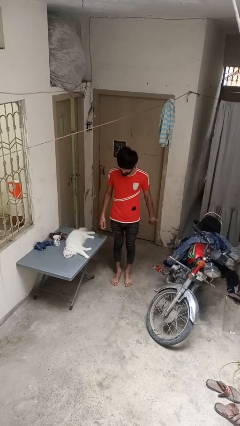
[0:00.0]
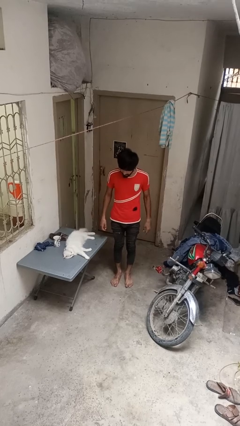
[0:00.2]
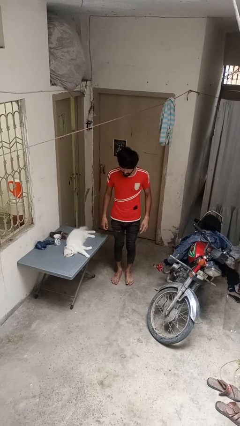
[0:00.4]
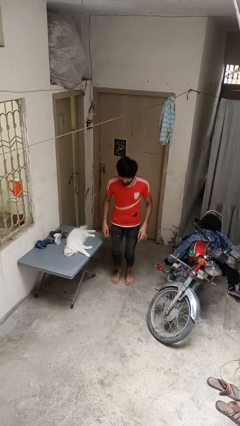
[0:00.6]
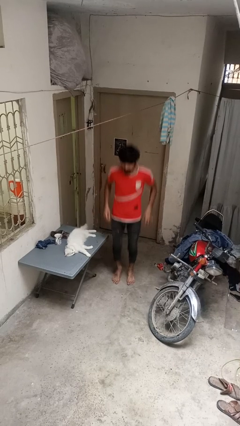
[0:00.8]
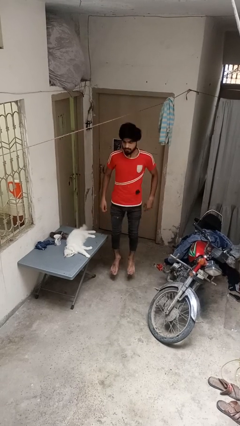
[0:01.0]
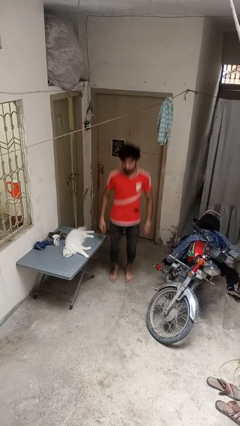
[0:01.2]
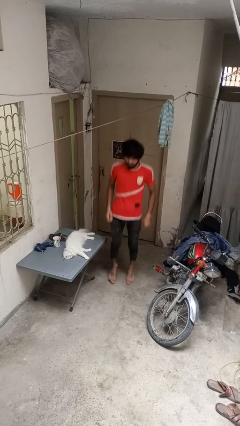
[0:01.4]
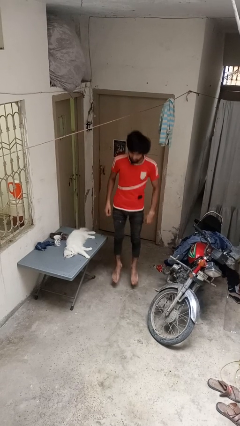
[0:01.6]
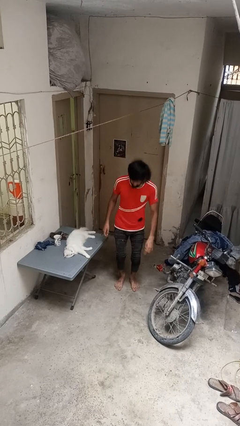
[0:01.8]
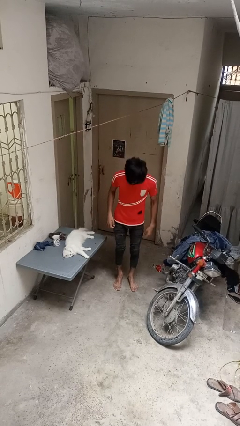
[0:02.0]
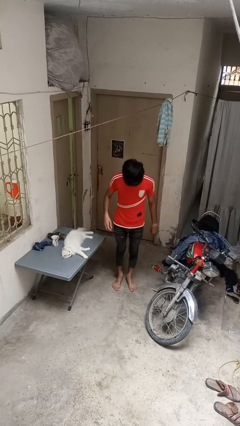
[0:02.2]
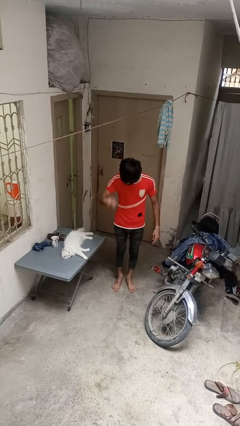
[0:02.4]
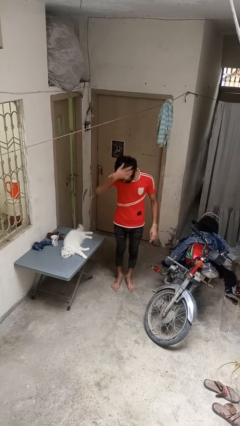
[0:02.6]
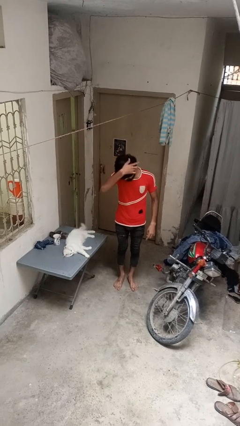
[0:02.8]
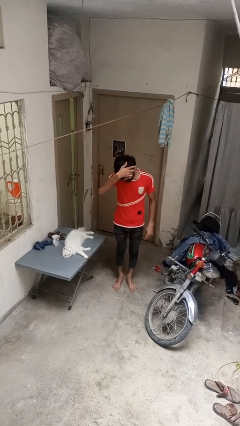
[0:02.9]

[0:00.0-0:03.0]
person jumps

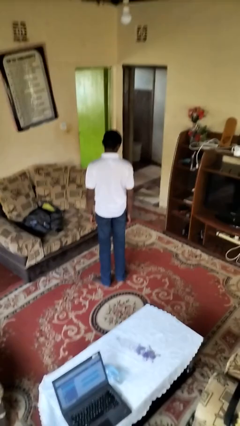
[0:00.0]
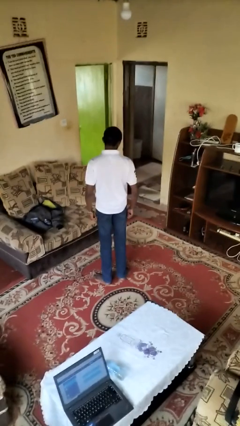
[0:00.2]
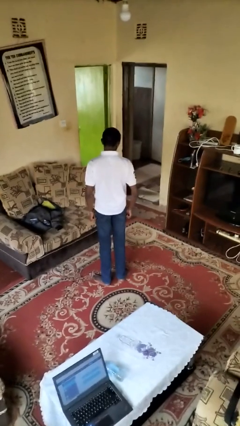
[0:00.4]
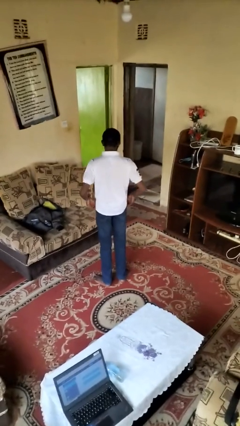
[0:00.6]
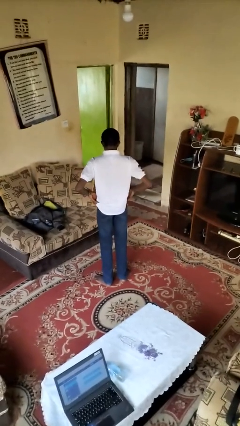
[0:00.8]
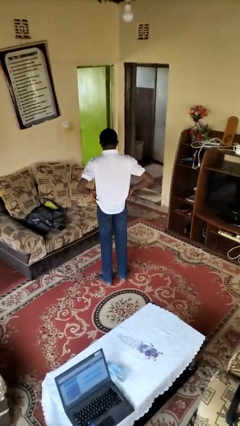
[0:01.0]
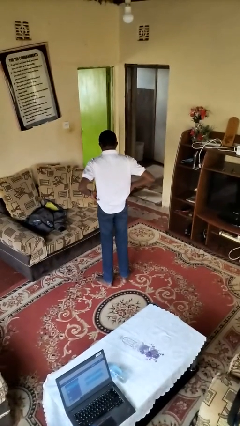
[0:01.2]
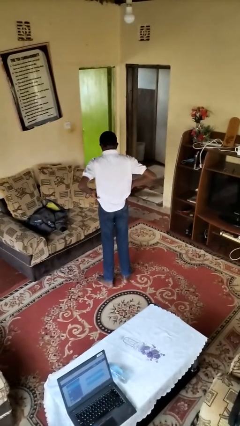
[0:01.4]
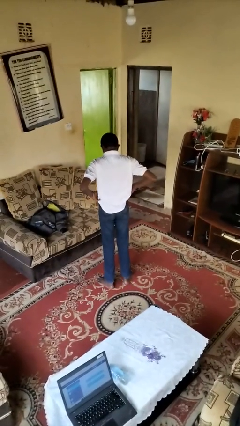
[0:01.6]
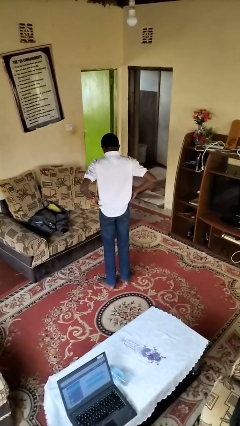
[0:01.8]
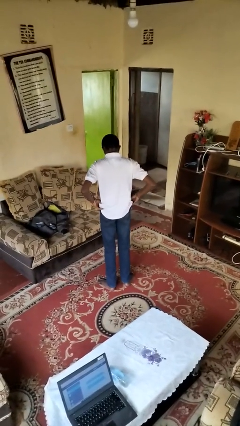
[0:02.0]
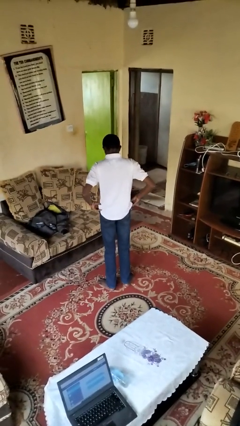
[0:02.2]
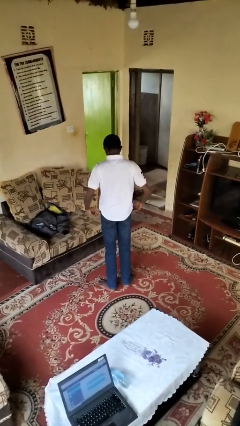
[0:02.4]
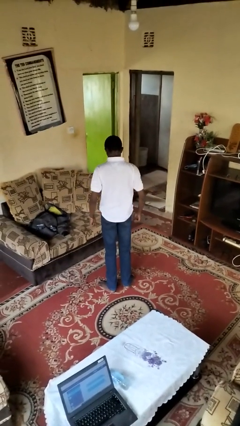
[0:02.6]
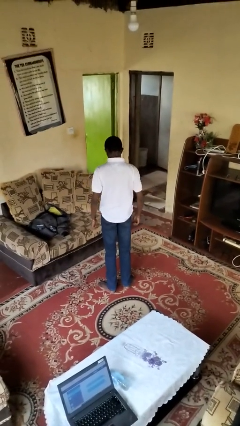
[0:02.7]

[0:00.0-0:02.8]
person hikes up pants

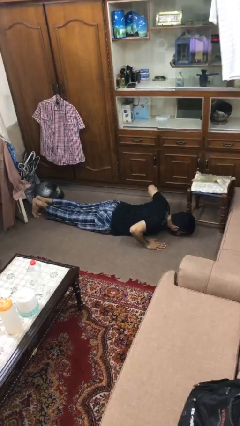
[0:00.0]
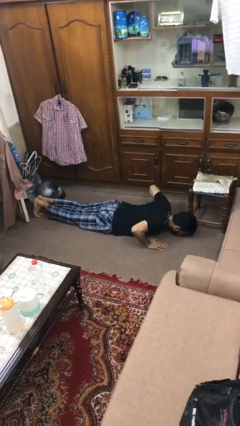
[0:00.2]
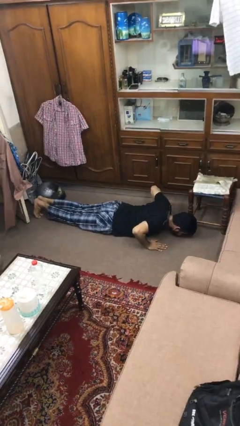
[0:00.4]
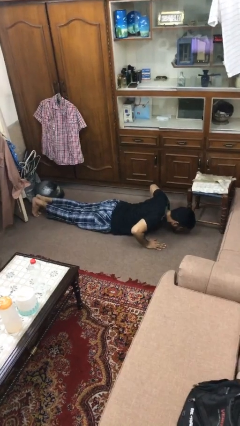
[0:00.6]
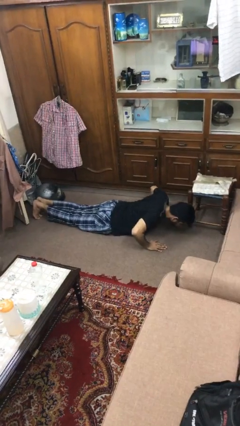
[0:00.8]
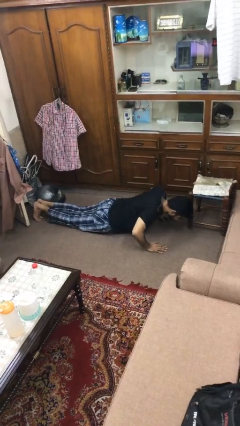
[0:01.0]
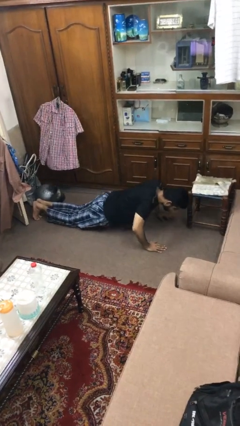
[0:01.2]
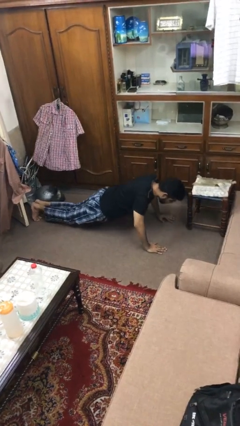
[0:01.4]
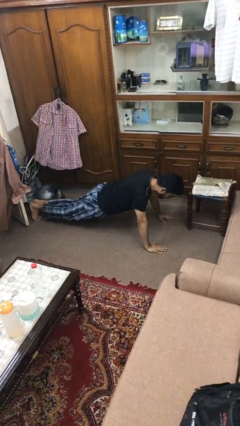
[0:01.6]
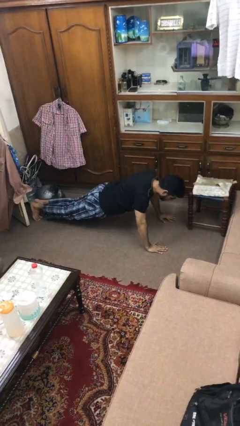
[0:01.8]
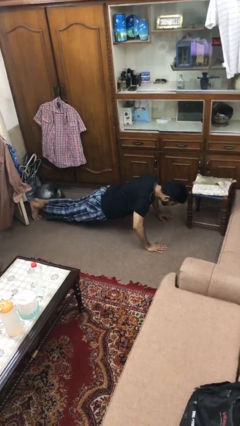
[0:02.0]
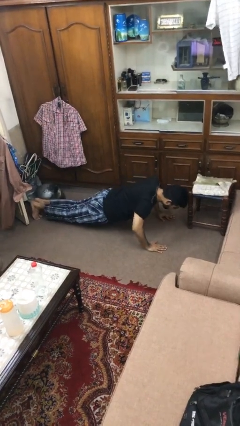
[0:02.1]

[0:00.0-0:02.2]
person exercises with pushup

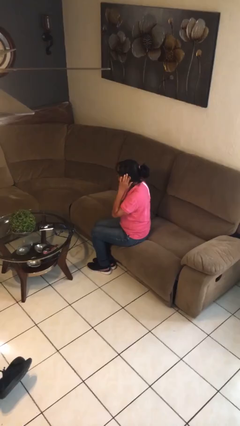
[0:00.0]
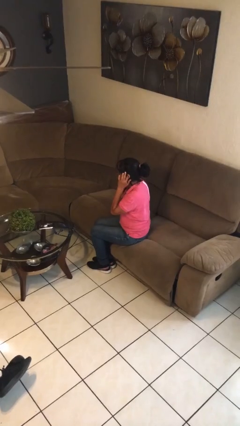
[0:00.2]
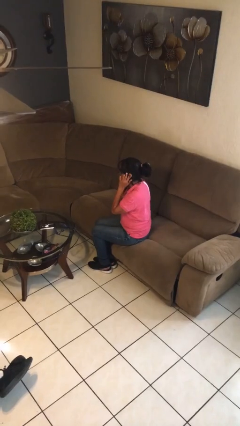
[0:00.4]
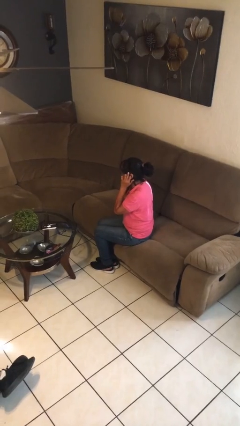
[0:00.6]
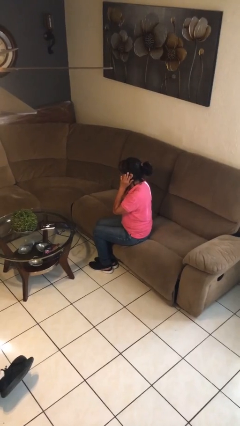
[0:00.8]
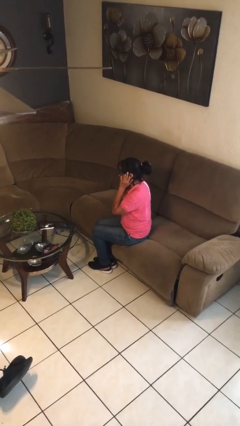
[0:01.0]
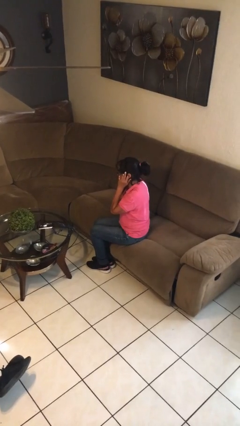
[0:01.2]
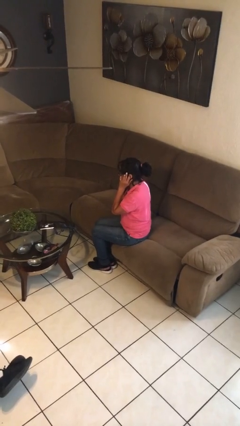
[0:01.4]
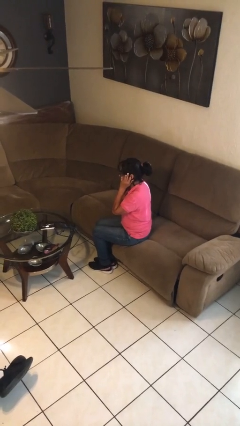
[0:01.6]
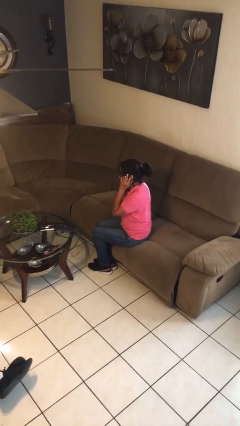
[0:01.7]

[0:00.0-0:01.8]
person puts fingers in ear

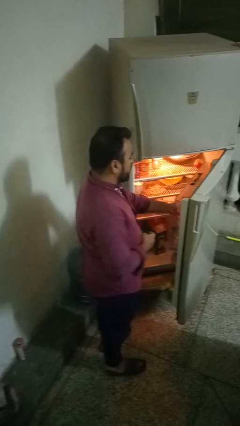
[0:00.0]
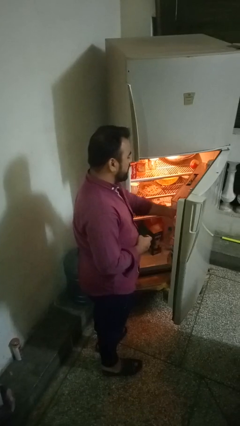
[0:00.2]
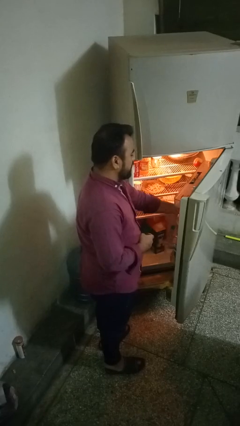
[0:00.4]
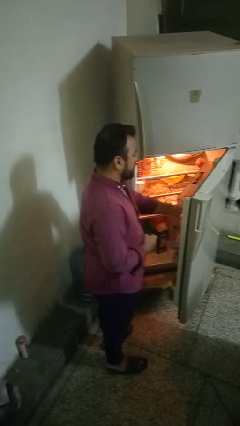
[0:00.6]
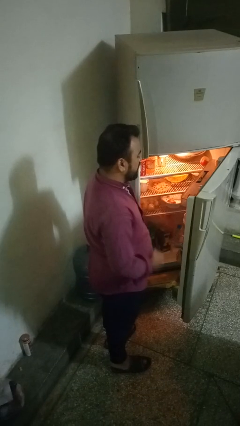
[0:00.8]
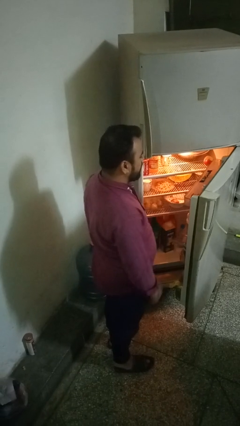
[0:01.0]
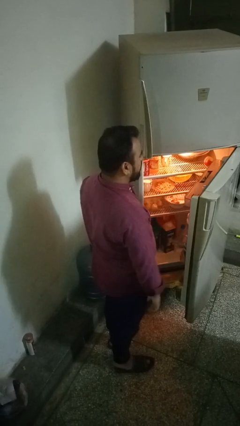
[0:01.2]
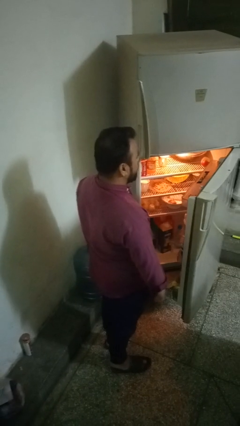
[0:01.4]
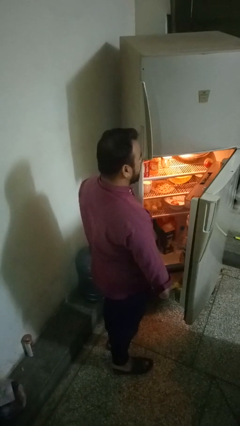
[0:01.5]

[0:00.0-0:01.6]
person puts object into refrigerator

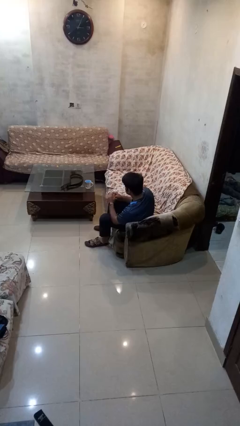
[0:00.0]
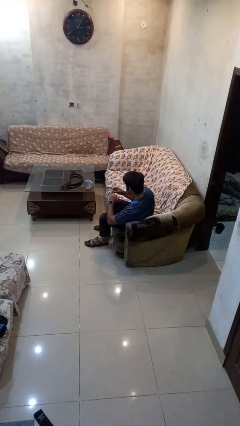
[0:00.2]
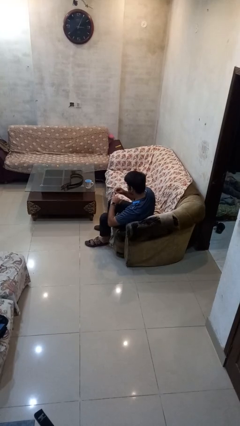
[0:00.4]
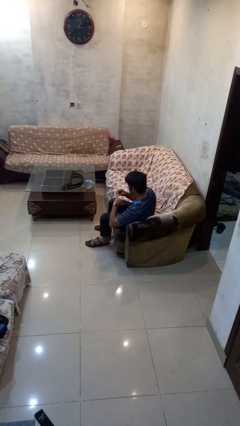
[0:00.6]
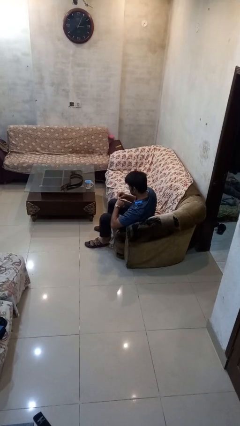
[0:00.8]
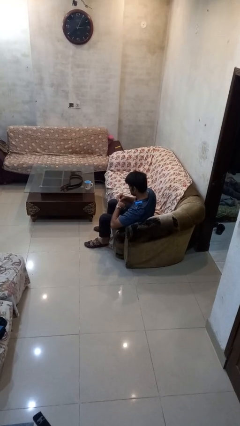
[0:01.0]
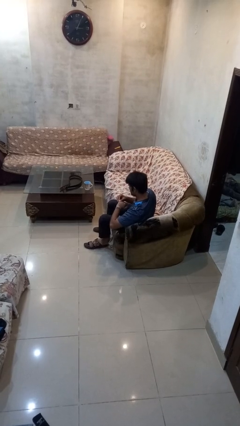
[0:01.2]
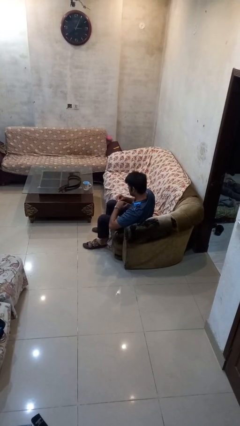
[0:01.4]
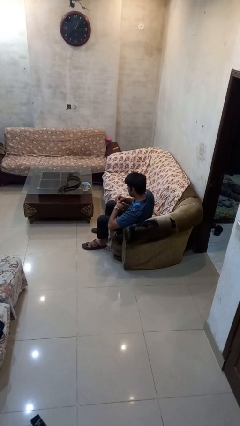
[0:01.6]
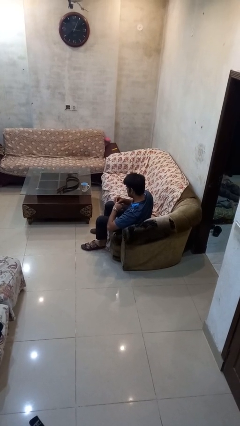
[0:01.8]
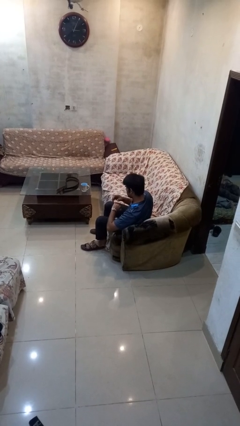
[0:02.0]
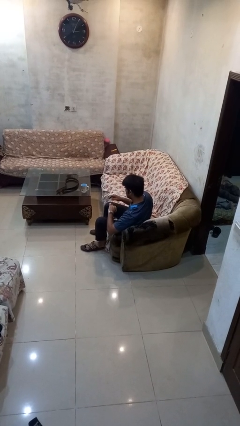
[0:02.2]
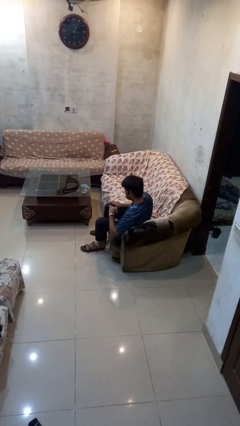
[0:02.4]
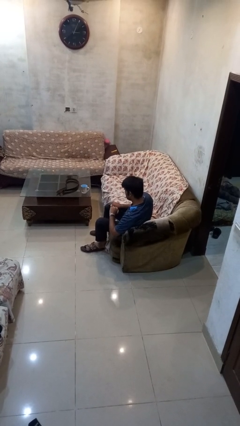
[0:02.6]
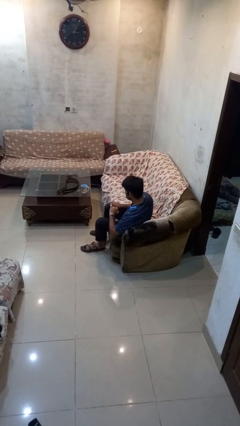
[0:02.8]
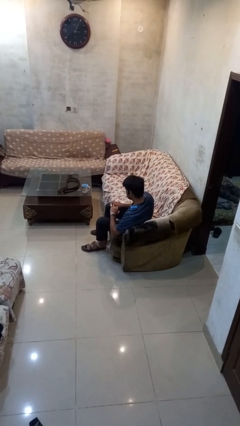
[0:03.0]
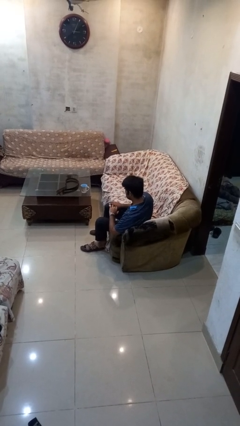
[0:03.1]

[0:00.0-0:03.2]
person puts on ring

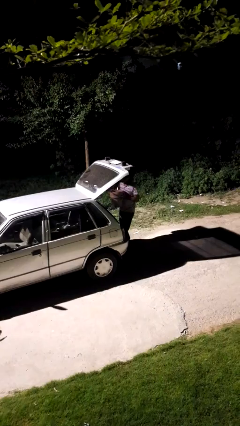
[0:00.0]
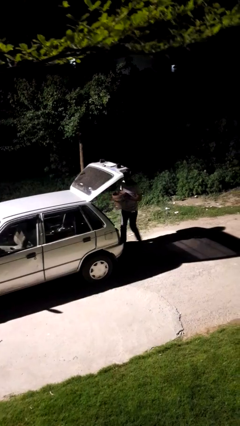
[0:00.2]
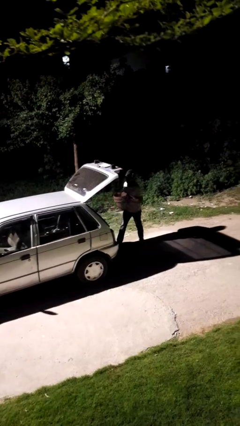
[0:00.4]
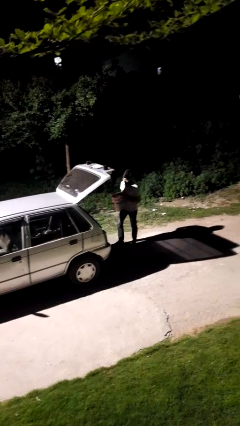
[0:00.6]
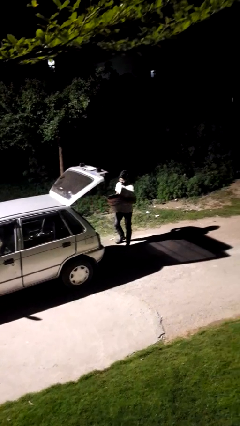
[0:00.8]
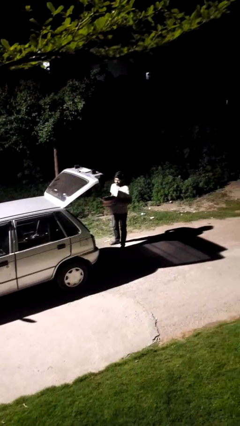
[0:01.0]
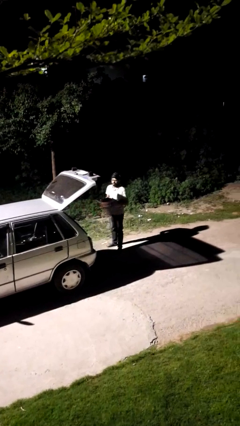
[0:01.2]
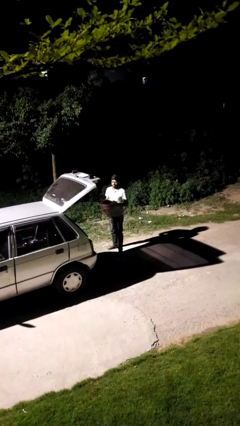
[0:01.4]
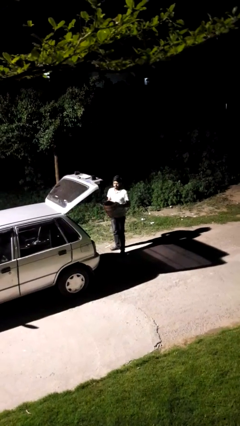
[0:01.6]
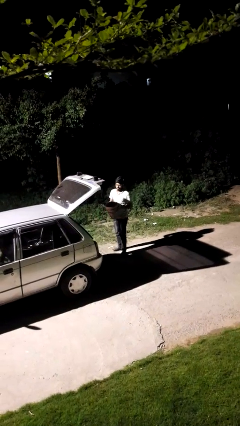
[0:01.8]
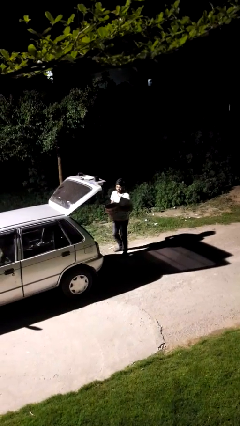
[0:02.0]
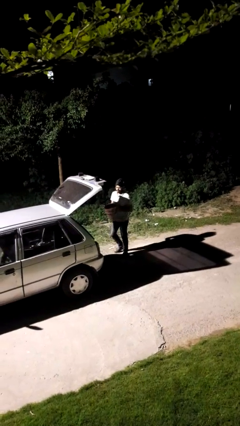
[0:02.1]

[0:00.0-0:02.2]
person unloads car
